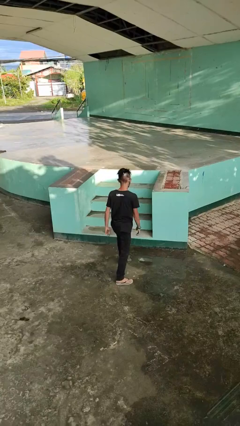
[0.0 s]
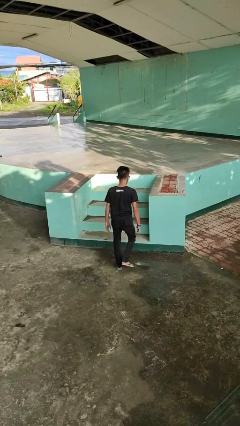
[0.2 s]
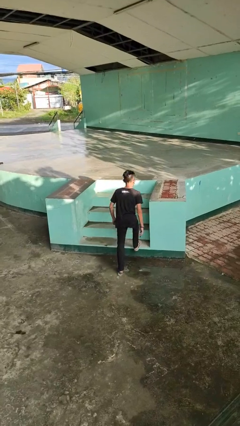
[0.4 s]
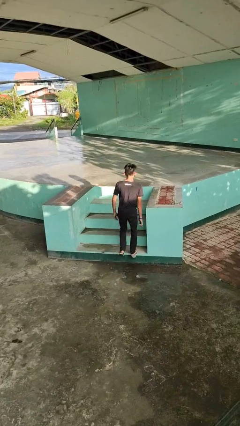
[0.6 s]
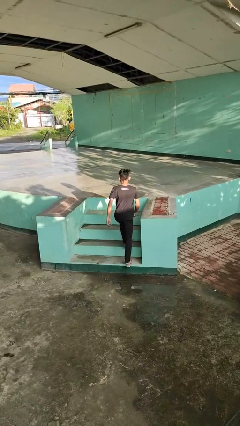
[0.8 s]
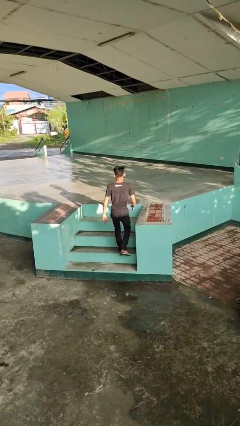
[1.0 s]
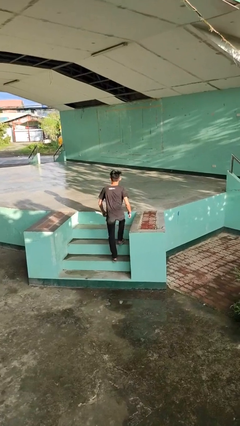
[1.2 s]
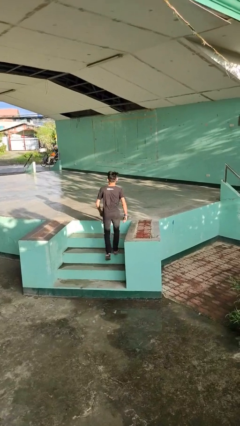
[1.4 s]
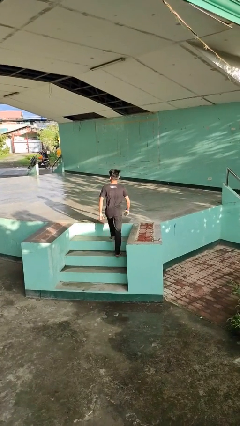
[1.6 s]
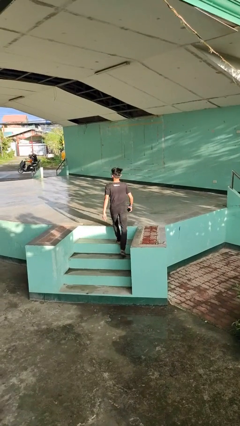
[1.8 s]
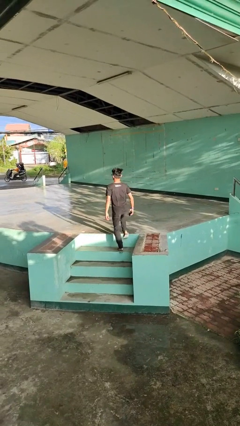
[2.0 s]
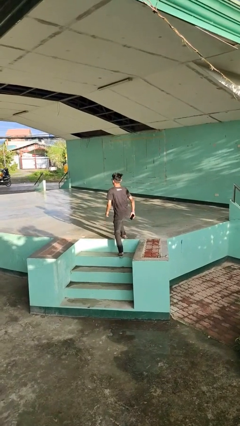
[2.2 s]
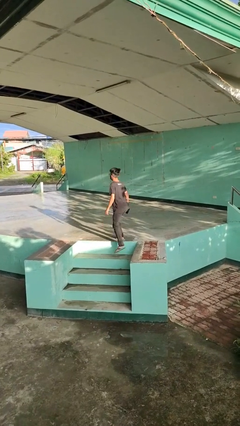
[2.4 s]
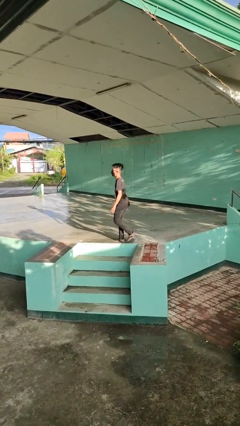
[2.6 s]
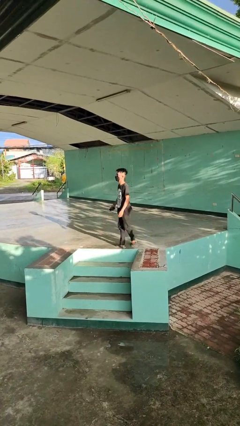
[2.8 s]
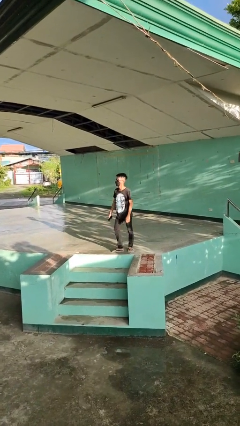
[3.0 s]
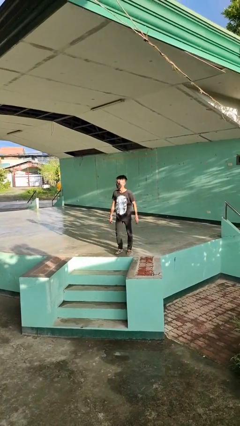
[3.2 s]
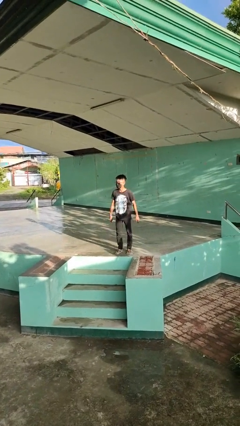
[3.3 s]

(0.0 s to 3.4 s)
person climbs up stairs

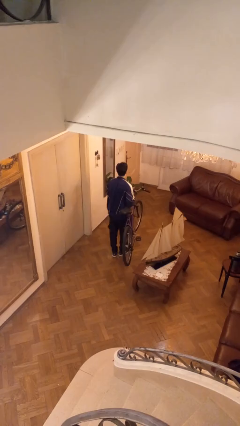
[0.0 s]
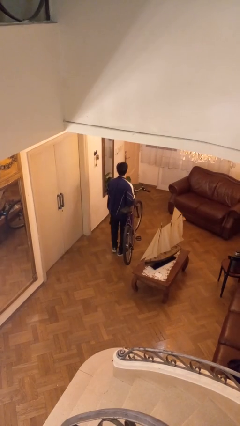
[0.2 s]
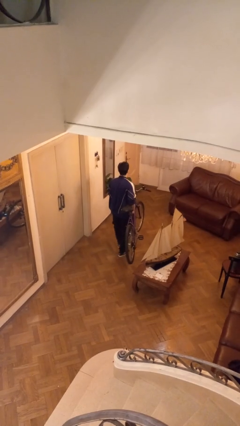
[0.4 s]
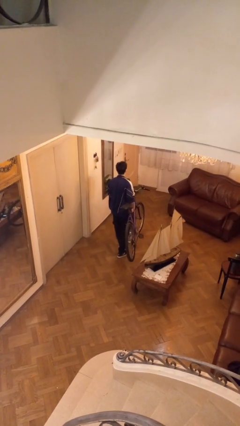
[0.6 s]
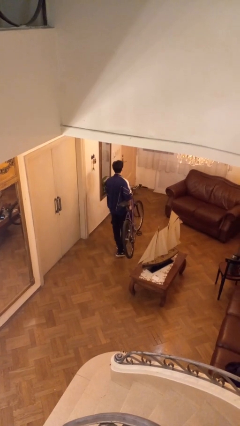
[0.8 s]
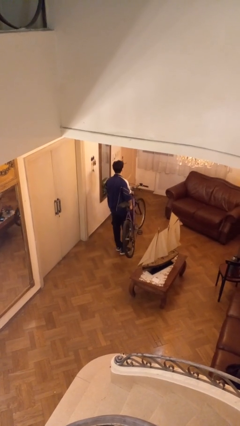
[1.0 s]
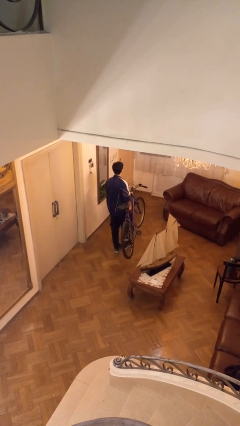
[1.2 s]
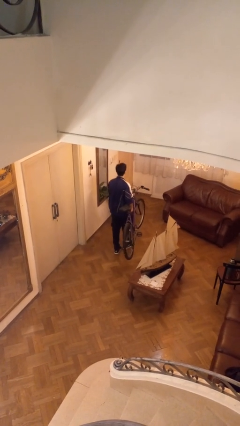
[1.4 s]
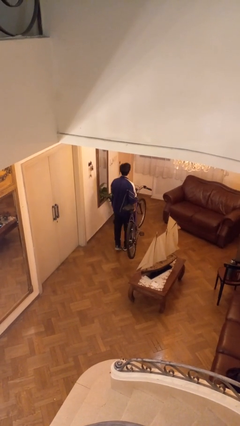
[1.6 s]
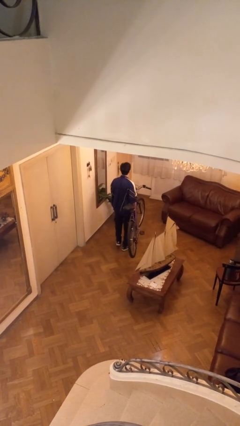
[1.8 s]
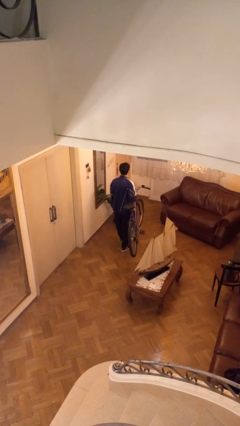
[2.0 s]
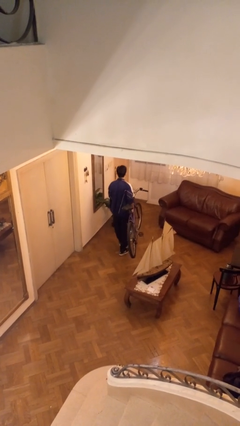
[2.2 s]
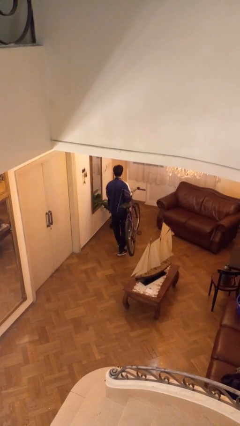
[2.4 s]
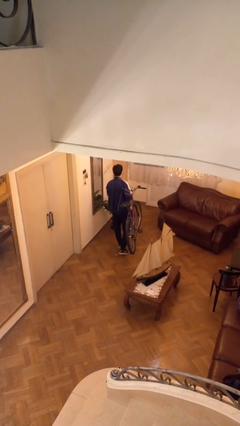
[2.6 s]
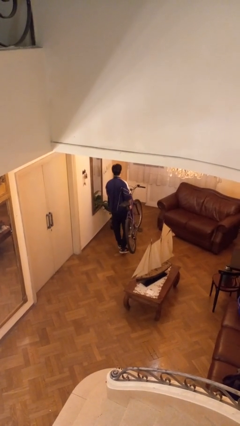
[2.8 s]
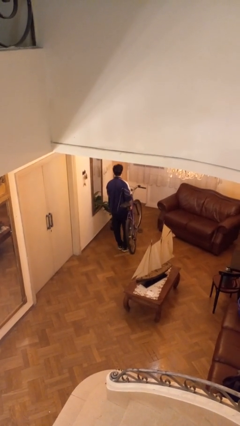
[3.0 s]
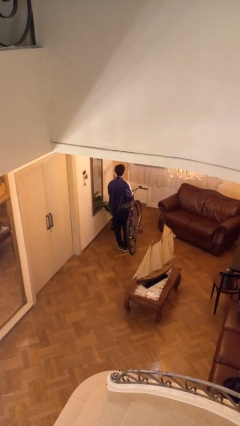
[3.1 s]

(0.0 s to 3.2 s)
person carries bicycle

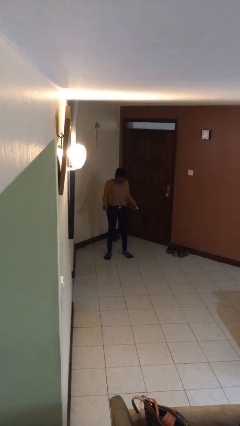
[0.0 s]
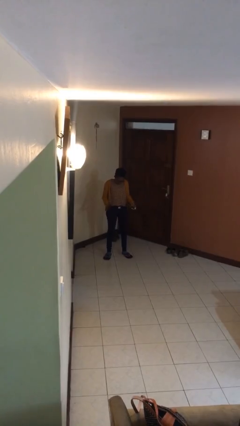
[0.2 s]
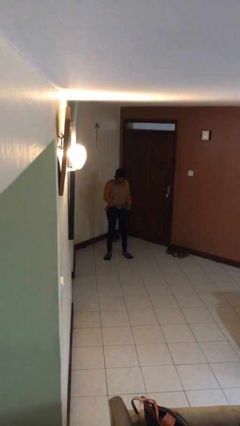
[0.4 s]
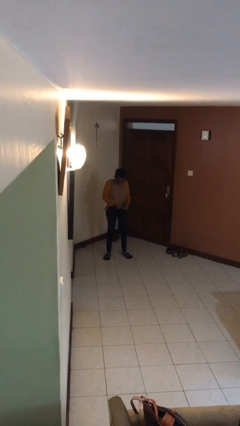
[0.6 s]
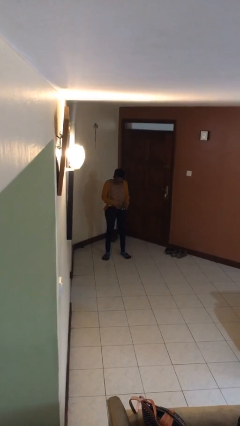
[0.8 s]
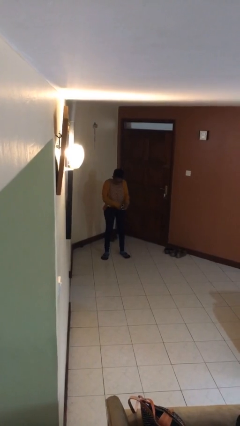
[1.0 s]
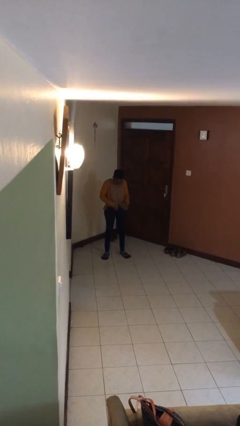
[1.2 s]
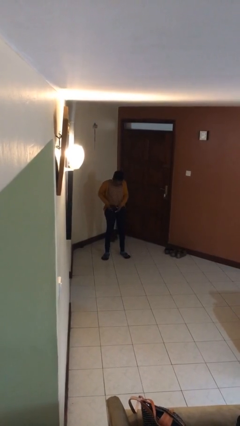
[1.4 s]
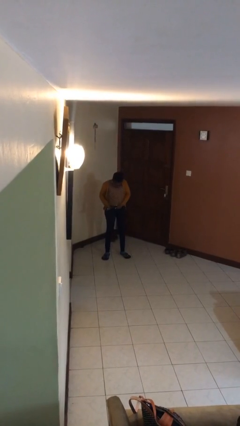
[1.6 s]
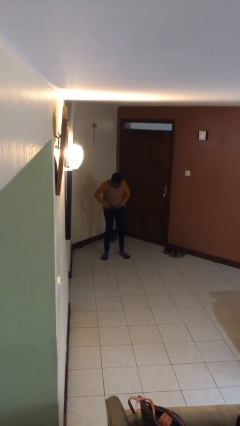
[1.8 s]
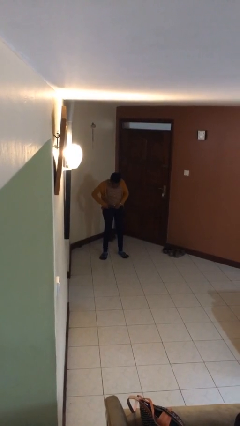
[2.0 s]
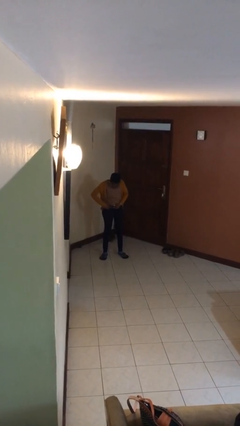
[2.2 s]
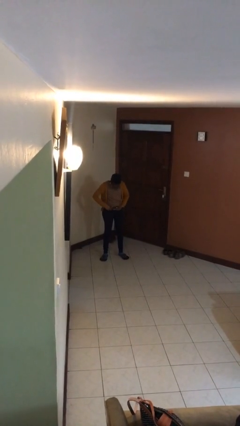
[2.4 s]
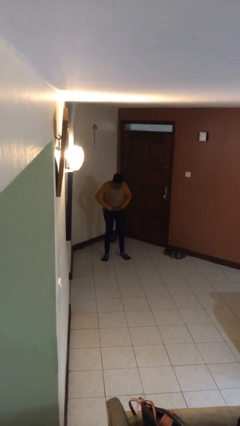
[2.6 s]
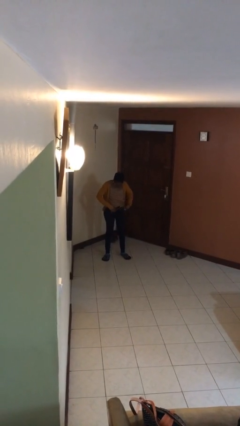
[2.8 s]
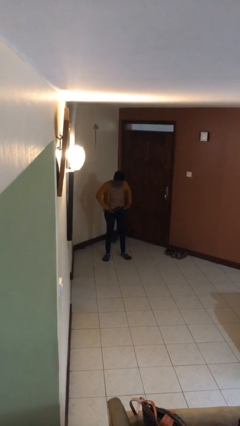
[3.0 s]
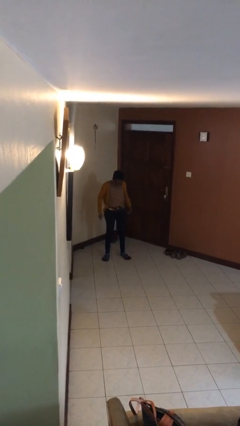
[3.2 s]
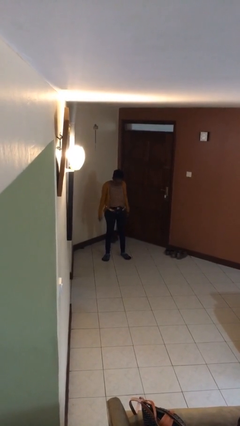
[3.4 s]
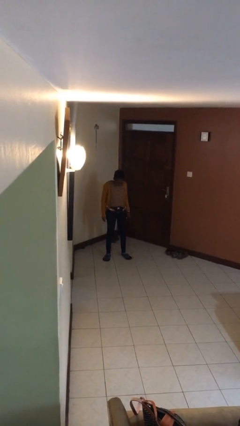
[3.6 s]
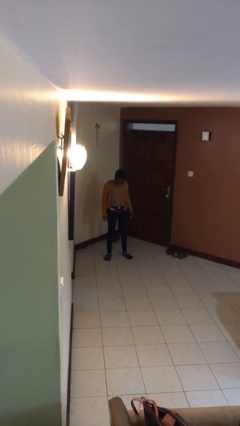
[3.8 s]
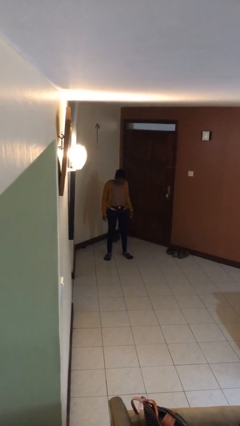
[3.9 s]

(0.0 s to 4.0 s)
person puts on belt

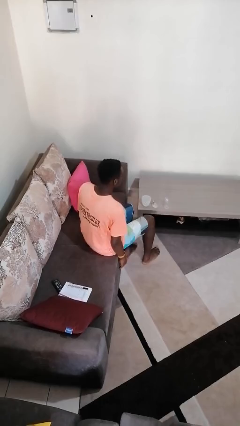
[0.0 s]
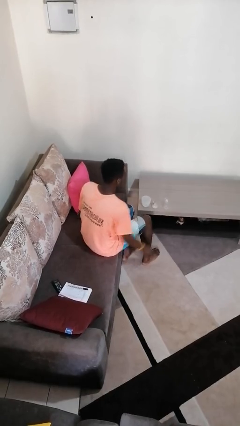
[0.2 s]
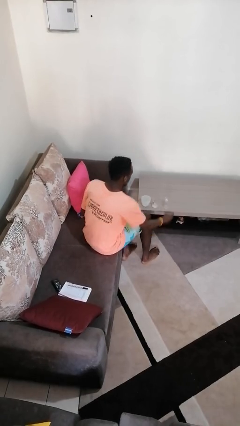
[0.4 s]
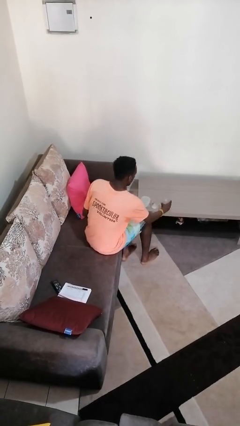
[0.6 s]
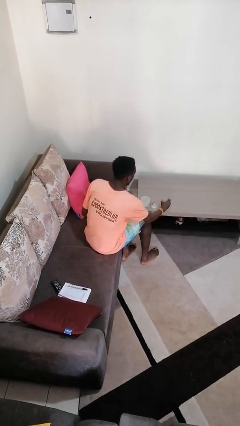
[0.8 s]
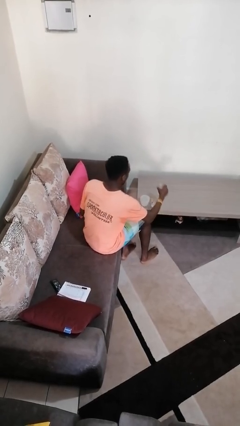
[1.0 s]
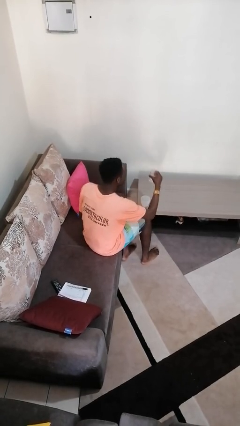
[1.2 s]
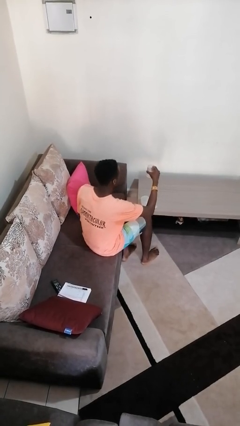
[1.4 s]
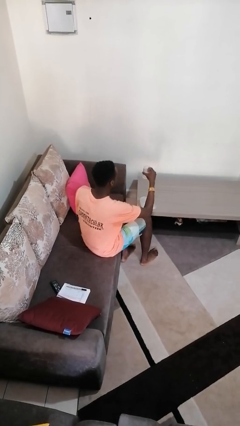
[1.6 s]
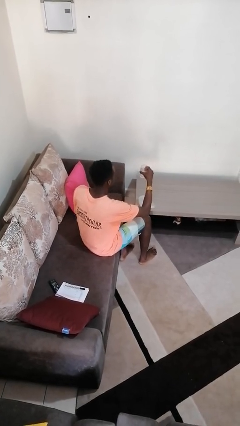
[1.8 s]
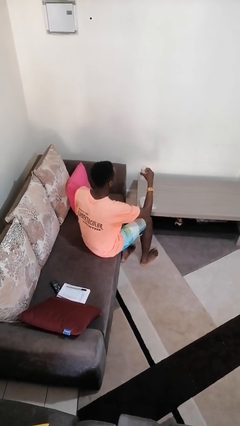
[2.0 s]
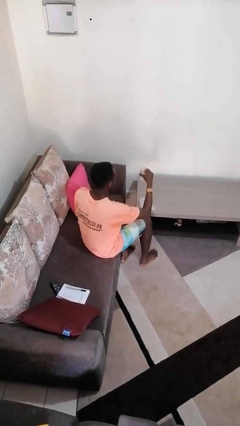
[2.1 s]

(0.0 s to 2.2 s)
person picks up object from table

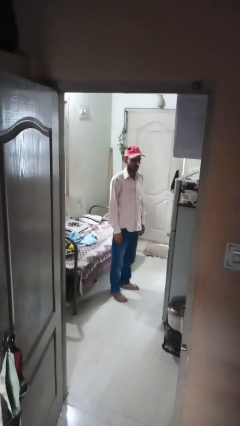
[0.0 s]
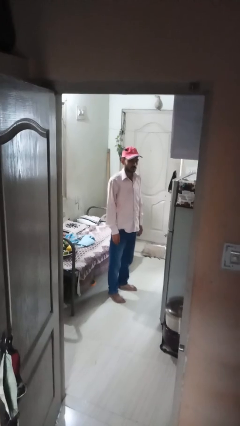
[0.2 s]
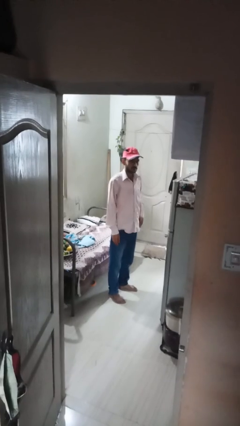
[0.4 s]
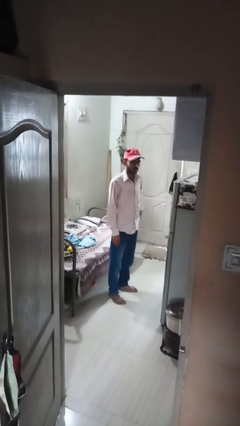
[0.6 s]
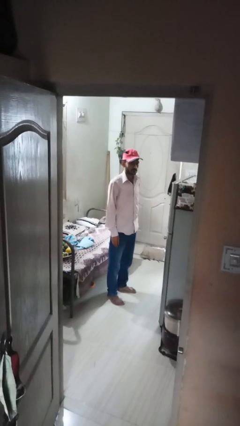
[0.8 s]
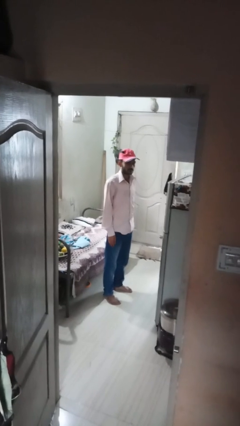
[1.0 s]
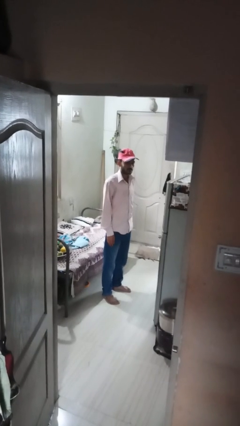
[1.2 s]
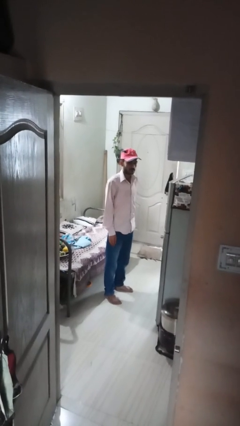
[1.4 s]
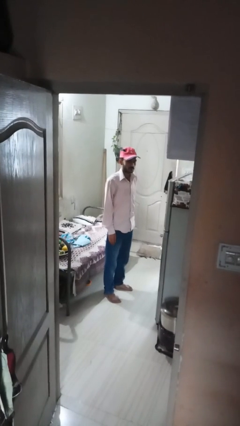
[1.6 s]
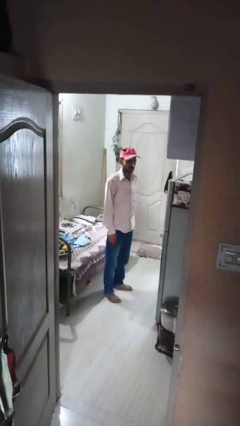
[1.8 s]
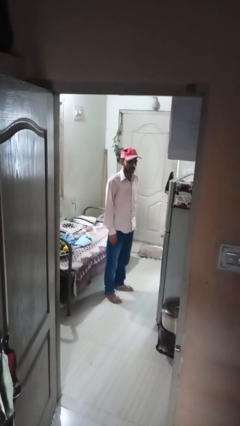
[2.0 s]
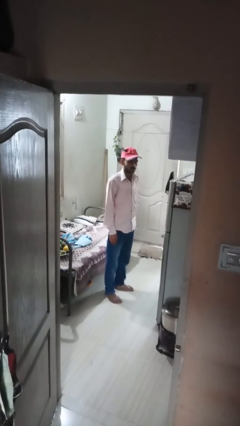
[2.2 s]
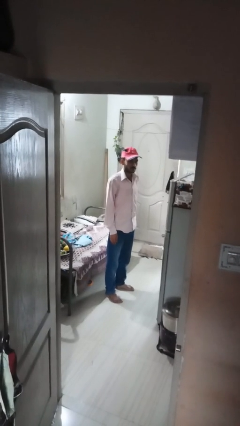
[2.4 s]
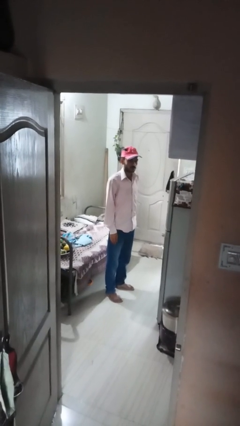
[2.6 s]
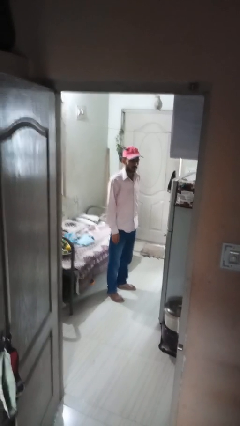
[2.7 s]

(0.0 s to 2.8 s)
person puts hands in back pockets

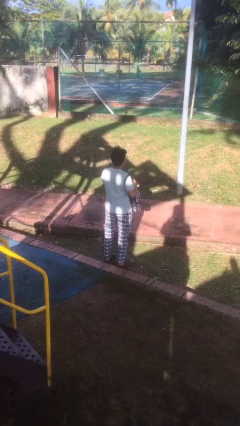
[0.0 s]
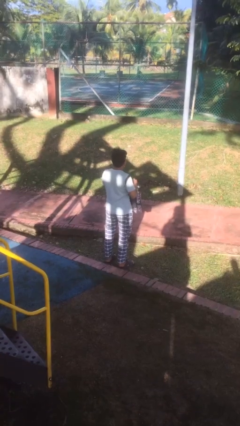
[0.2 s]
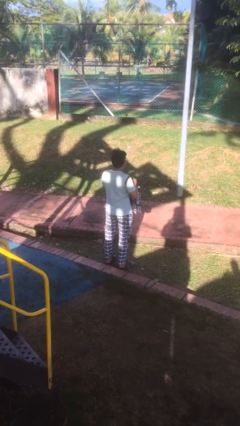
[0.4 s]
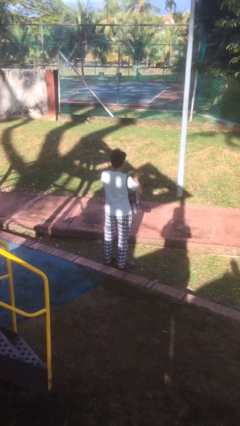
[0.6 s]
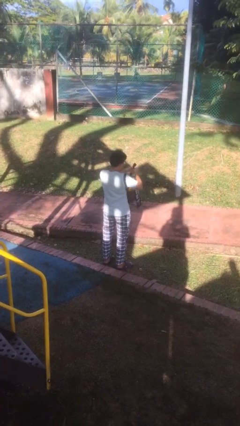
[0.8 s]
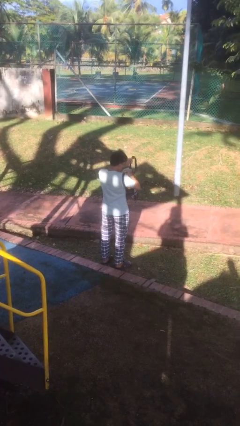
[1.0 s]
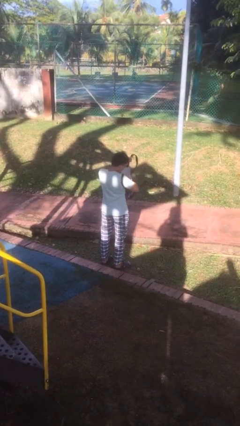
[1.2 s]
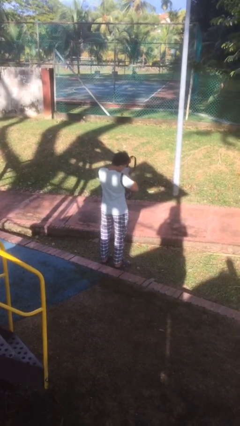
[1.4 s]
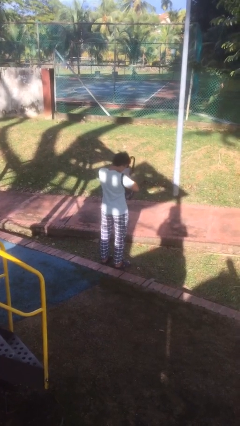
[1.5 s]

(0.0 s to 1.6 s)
person searches in bag

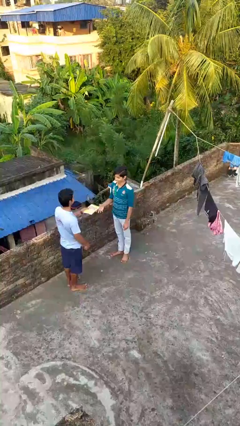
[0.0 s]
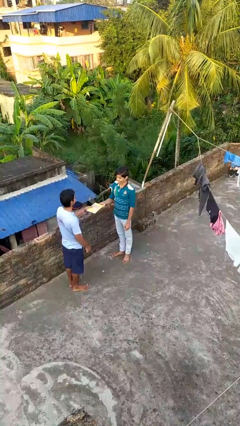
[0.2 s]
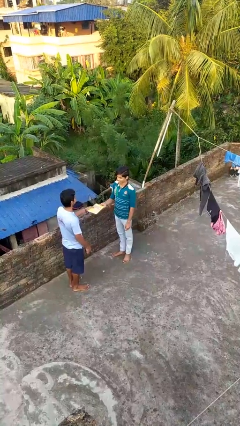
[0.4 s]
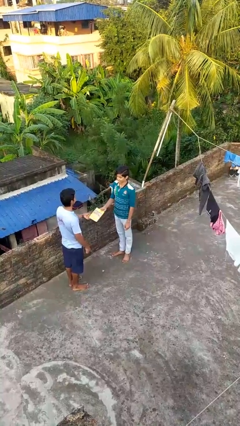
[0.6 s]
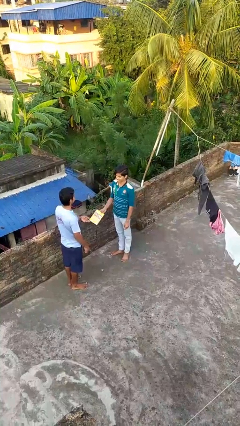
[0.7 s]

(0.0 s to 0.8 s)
person transfers object to person
